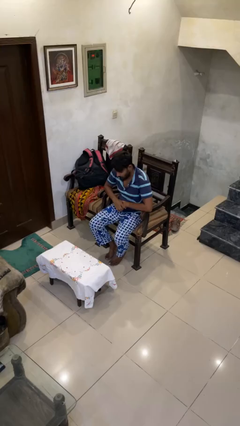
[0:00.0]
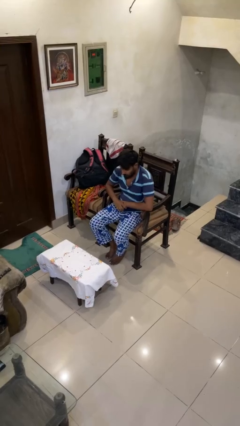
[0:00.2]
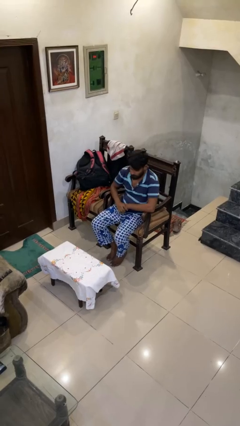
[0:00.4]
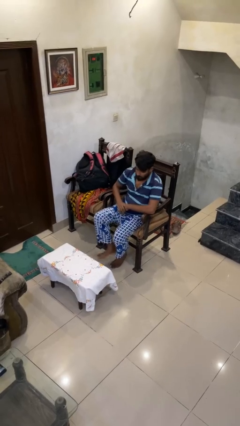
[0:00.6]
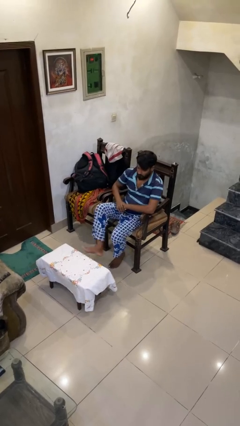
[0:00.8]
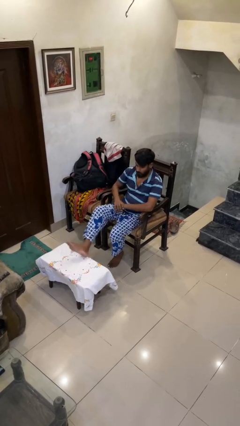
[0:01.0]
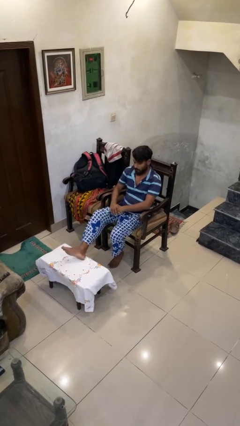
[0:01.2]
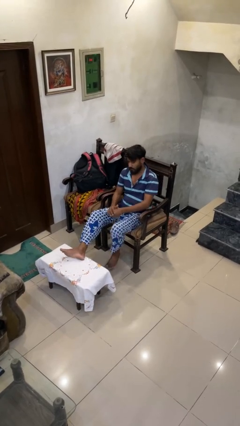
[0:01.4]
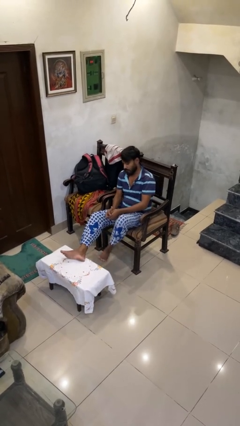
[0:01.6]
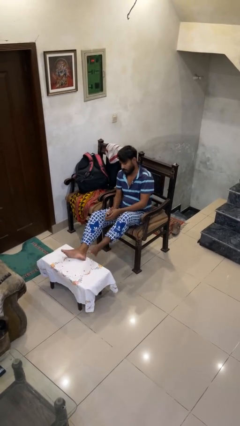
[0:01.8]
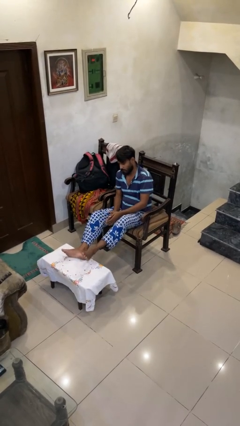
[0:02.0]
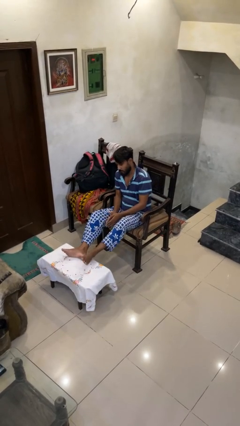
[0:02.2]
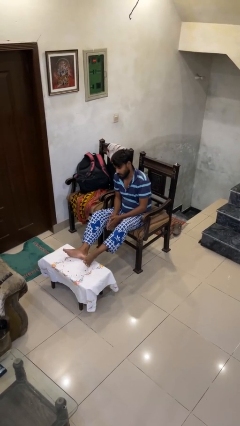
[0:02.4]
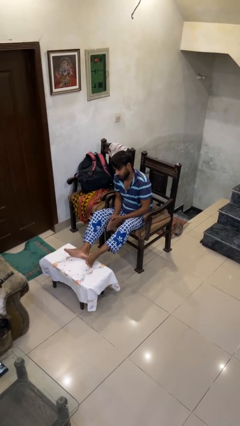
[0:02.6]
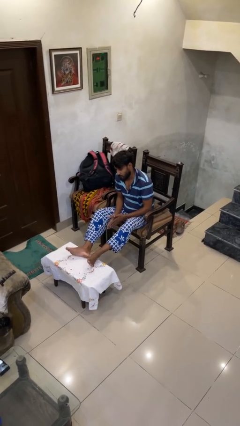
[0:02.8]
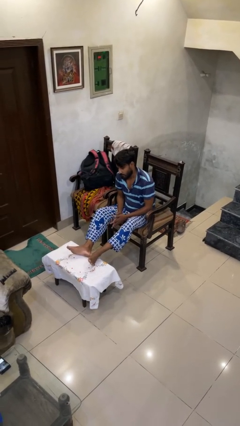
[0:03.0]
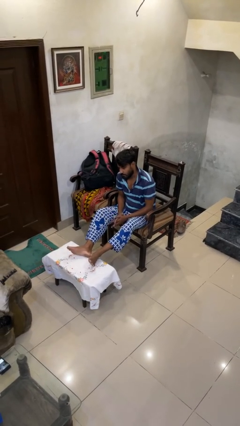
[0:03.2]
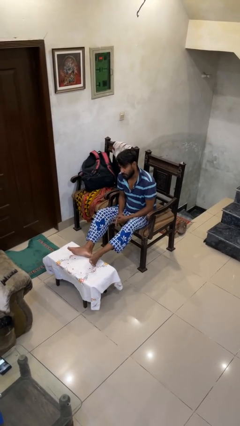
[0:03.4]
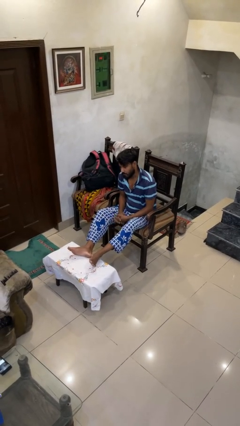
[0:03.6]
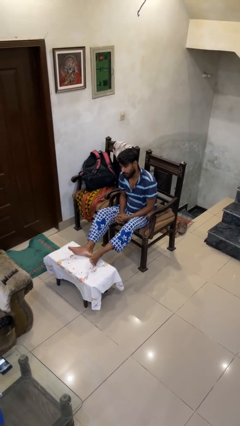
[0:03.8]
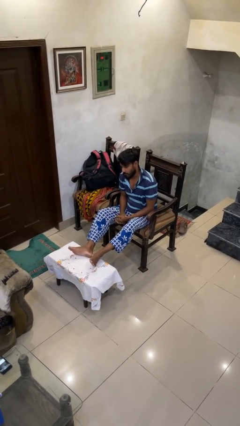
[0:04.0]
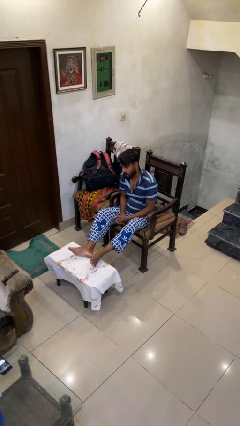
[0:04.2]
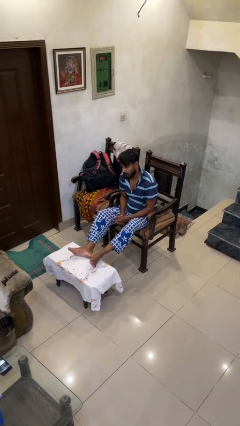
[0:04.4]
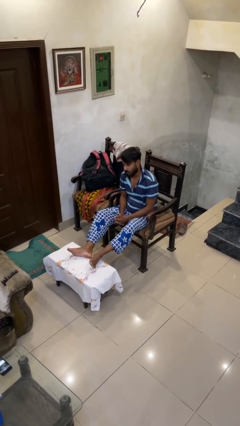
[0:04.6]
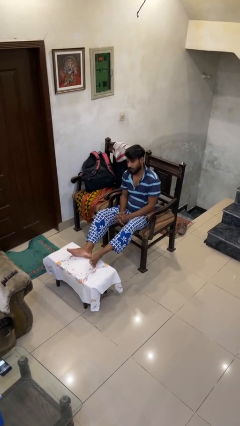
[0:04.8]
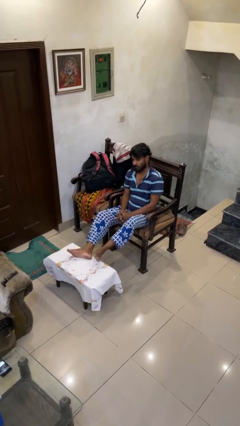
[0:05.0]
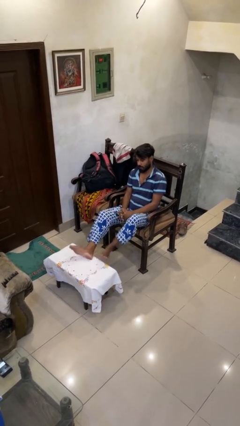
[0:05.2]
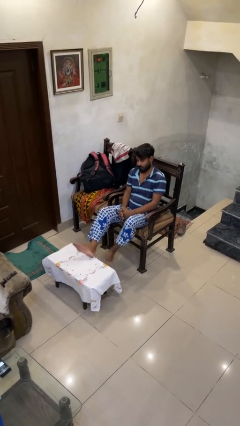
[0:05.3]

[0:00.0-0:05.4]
person puts feet up

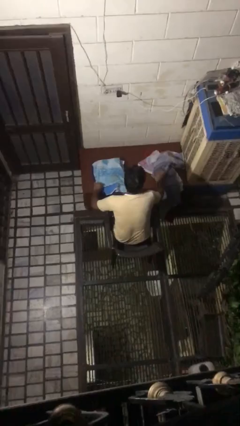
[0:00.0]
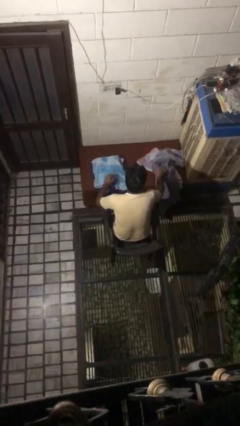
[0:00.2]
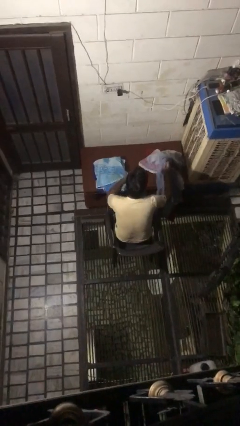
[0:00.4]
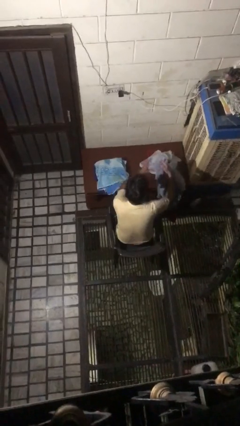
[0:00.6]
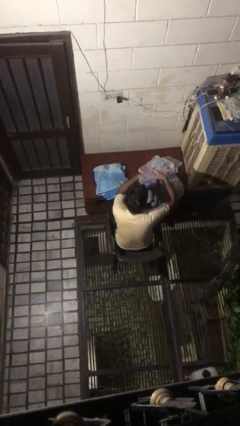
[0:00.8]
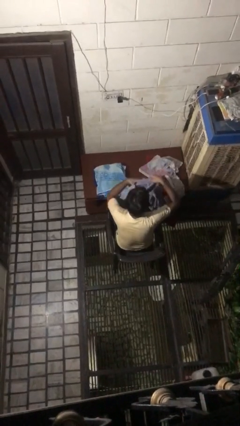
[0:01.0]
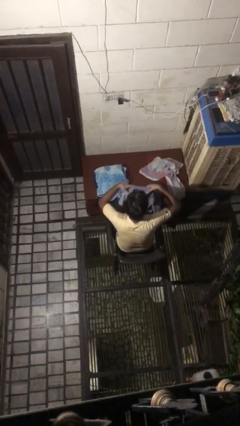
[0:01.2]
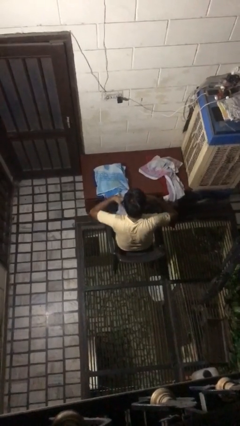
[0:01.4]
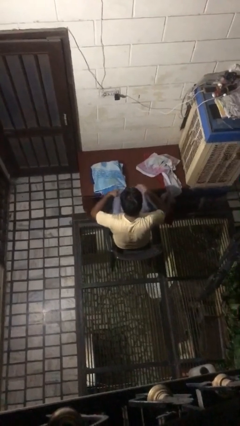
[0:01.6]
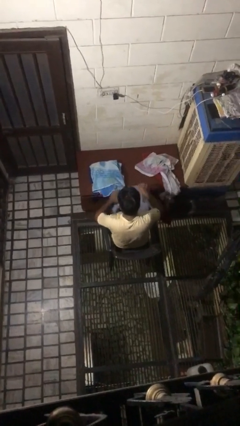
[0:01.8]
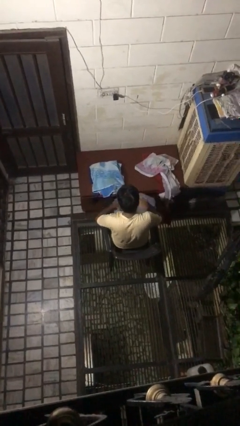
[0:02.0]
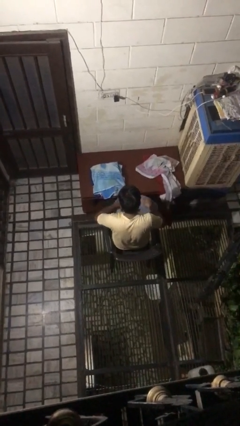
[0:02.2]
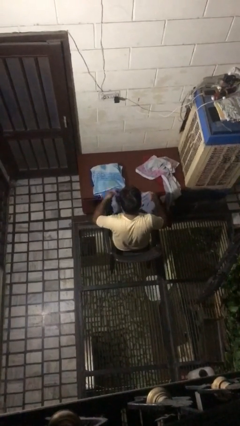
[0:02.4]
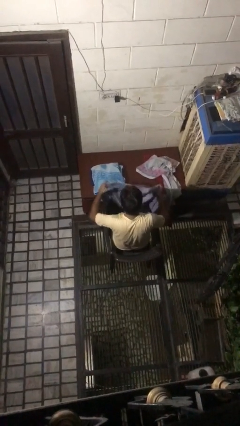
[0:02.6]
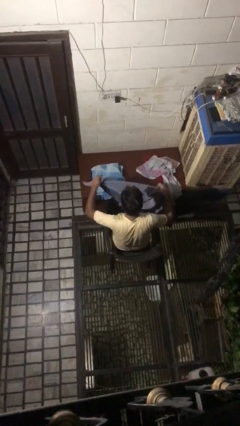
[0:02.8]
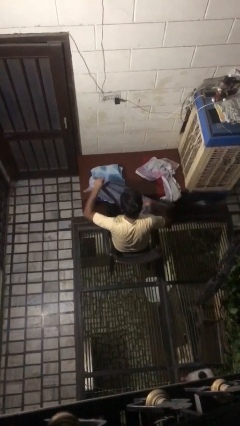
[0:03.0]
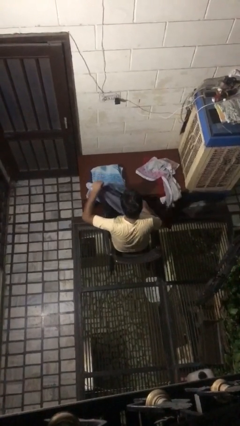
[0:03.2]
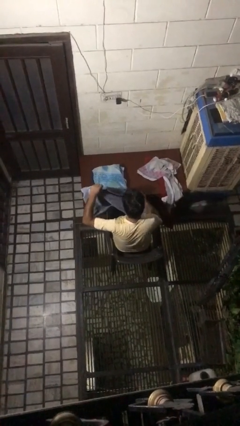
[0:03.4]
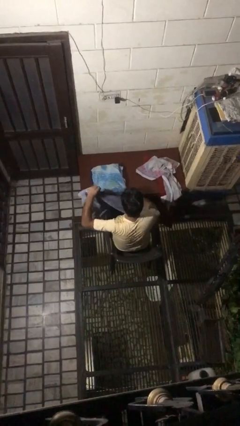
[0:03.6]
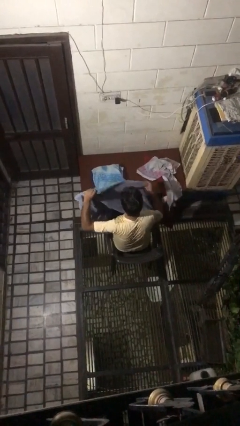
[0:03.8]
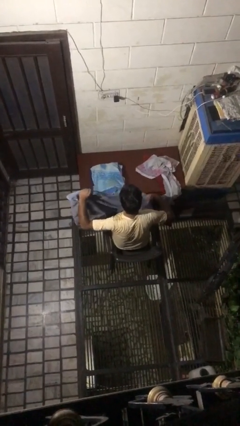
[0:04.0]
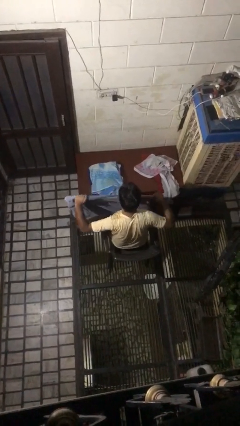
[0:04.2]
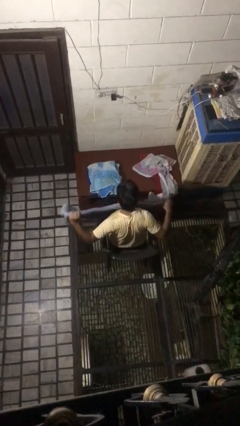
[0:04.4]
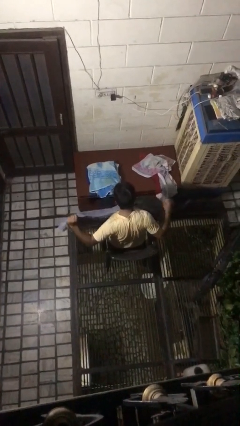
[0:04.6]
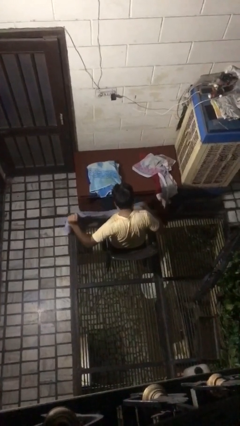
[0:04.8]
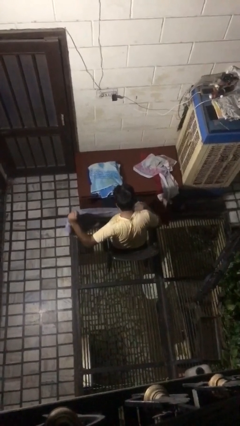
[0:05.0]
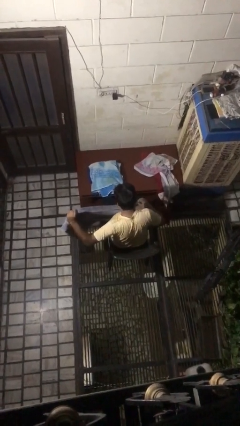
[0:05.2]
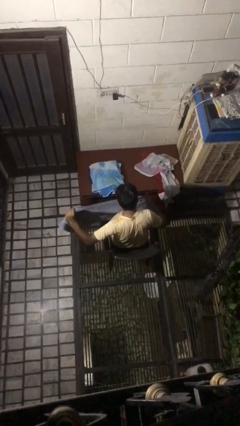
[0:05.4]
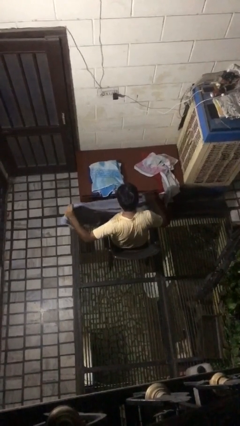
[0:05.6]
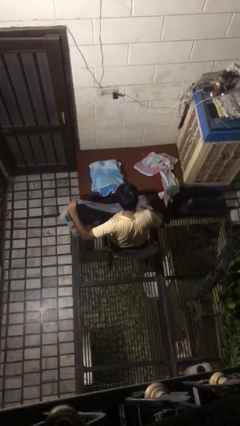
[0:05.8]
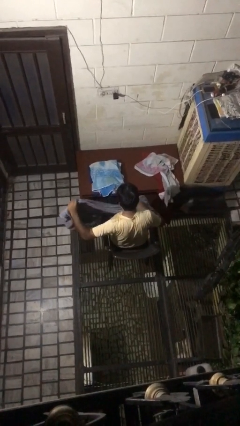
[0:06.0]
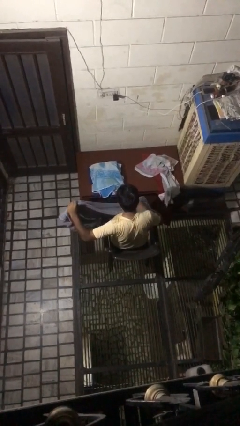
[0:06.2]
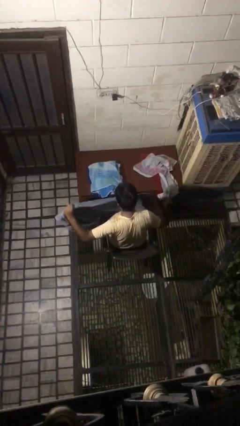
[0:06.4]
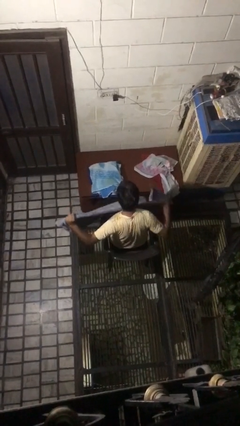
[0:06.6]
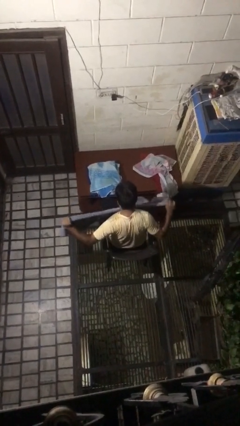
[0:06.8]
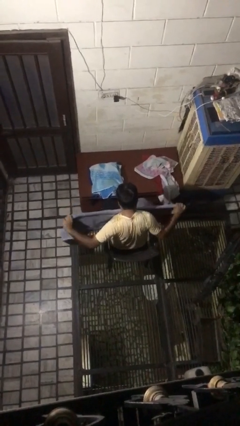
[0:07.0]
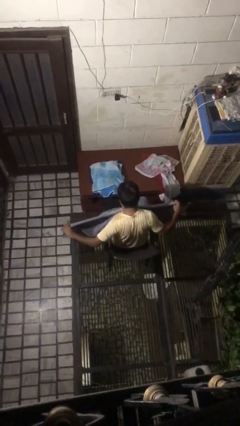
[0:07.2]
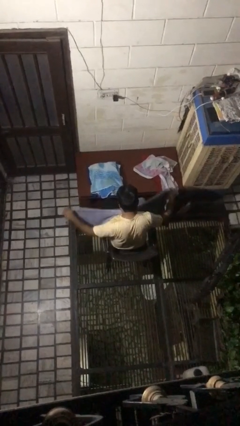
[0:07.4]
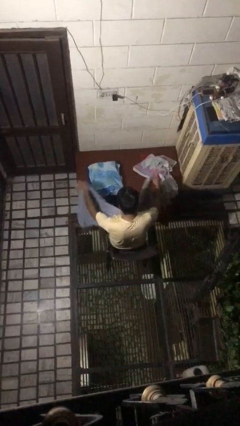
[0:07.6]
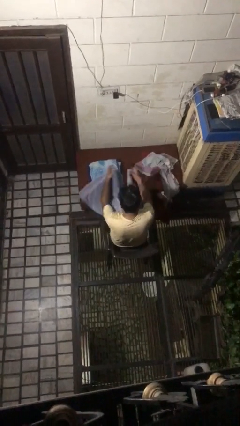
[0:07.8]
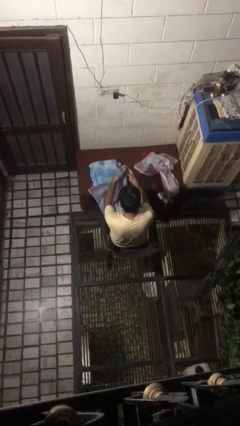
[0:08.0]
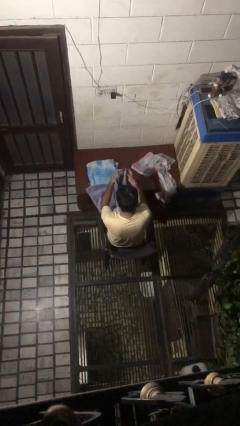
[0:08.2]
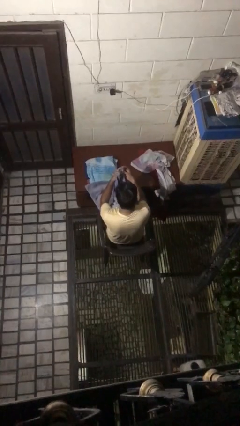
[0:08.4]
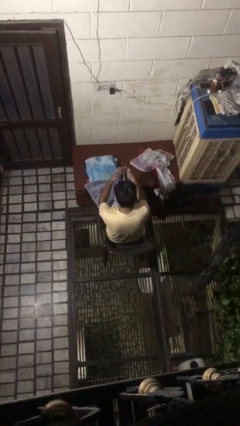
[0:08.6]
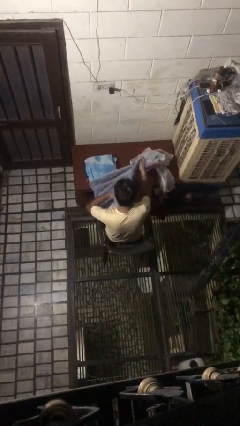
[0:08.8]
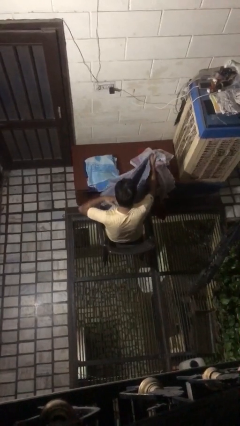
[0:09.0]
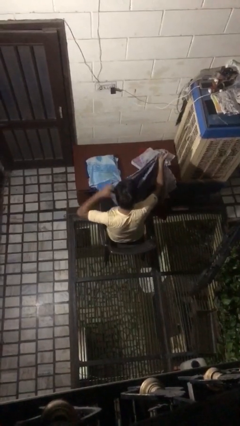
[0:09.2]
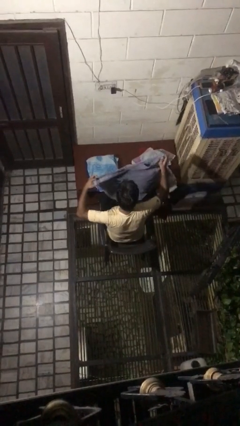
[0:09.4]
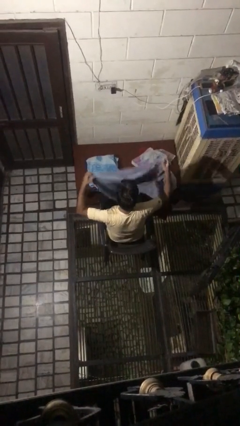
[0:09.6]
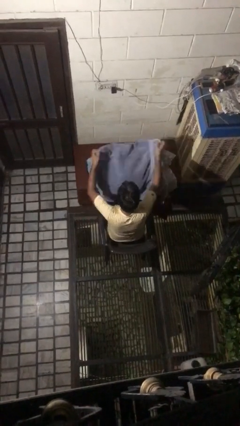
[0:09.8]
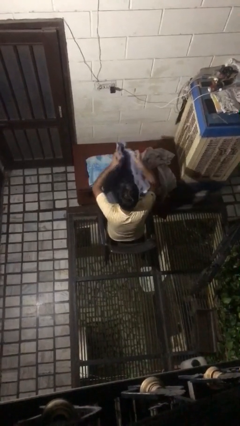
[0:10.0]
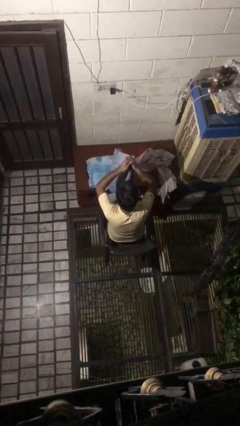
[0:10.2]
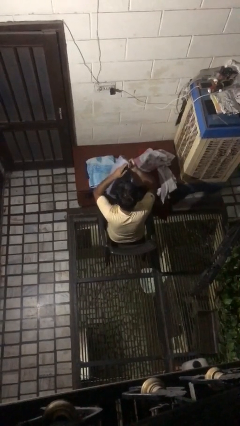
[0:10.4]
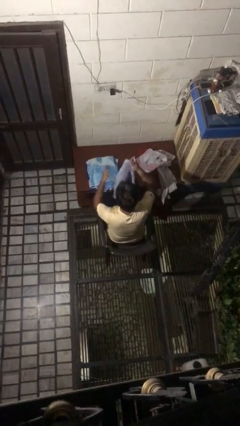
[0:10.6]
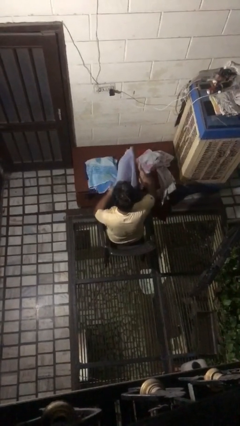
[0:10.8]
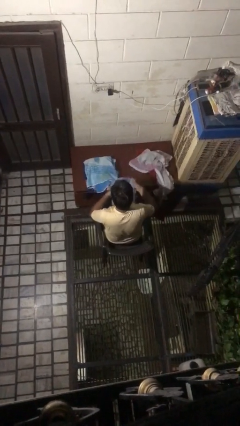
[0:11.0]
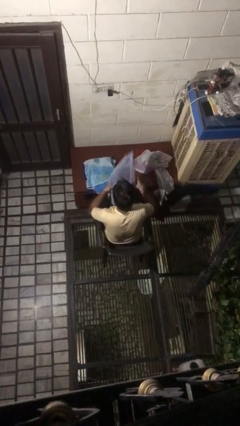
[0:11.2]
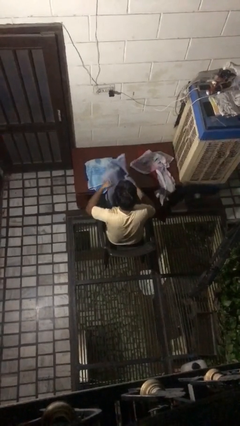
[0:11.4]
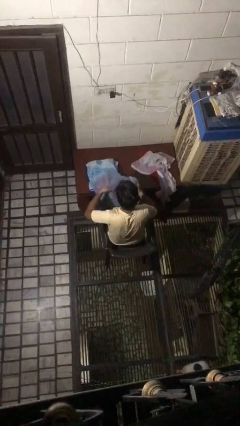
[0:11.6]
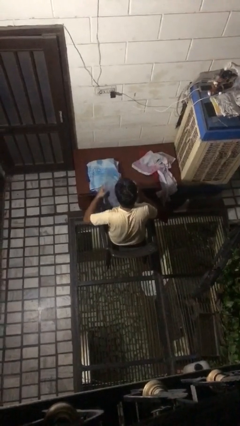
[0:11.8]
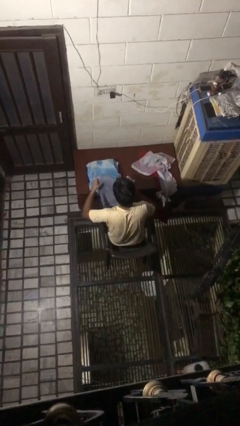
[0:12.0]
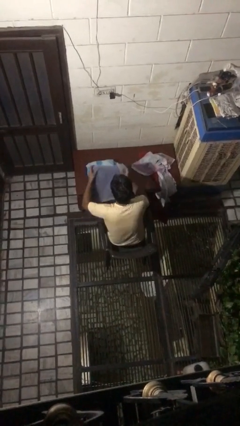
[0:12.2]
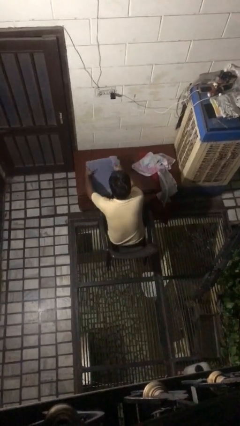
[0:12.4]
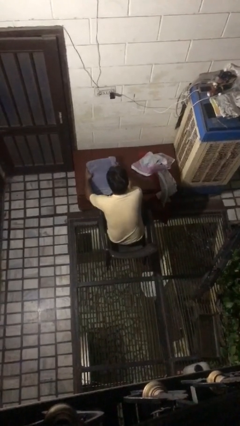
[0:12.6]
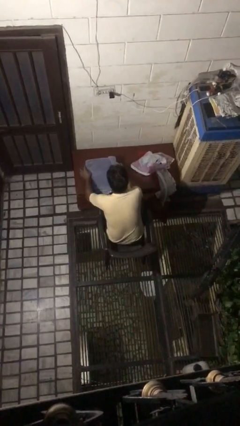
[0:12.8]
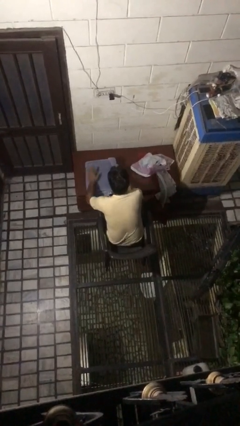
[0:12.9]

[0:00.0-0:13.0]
person folds towel

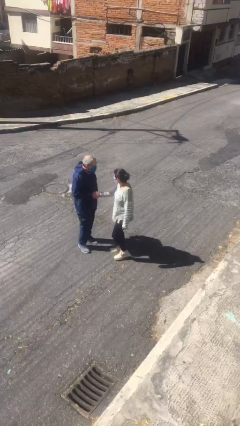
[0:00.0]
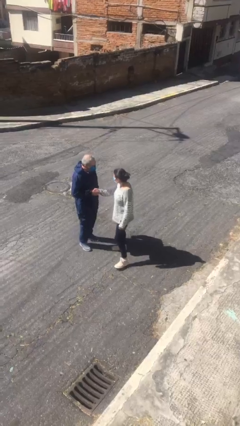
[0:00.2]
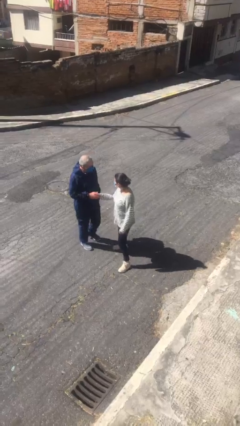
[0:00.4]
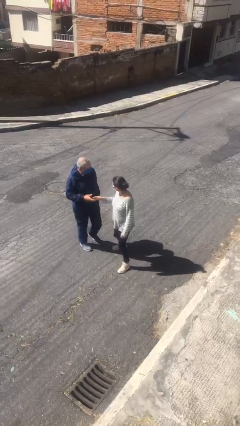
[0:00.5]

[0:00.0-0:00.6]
person shakes hand
